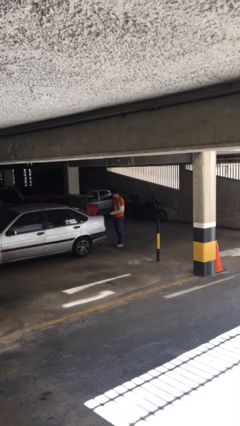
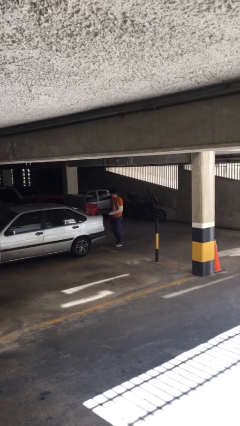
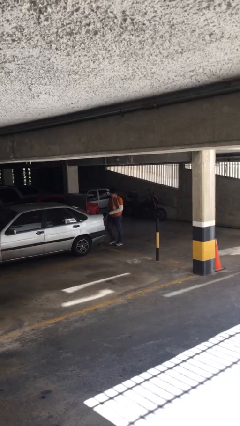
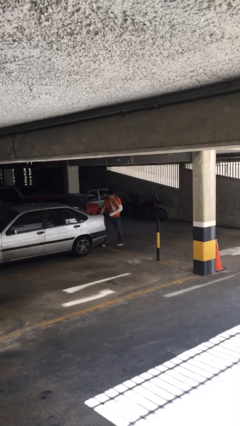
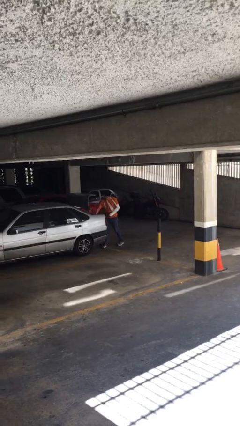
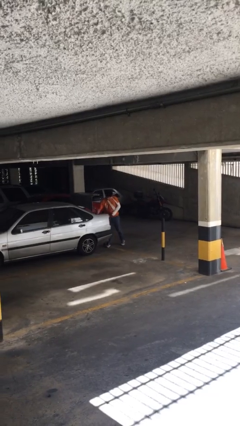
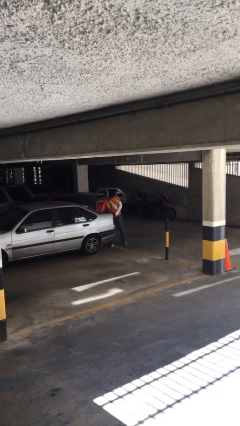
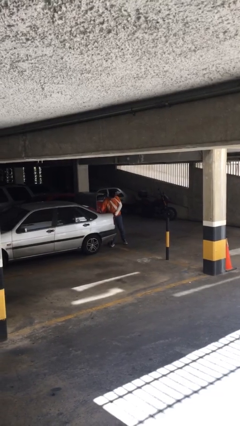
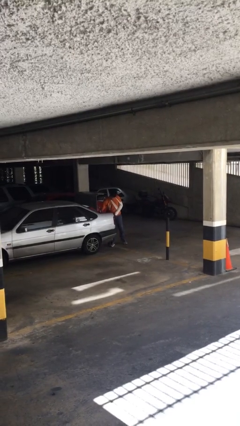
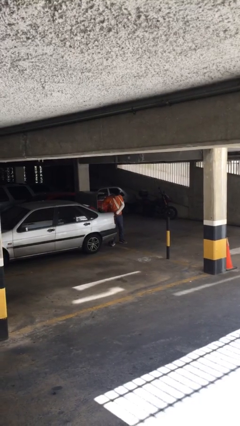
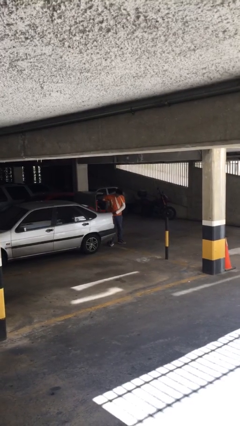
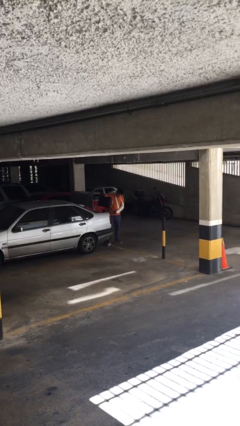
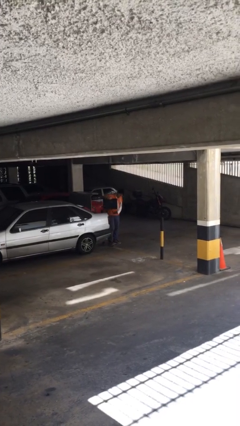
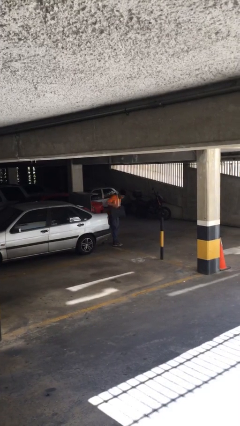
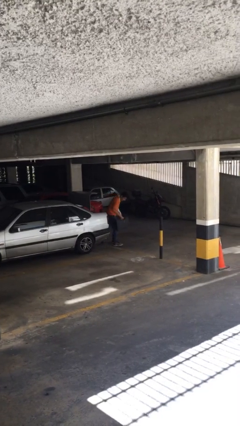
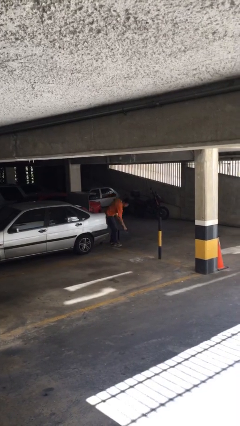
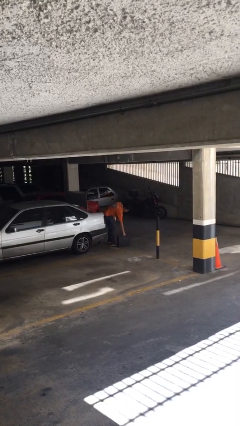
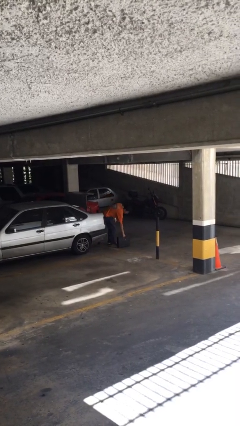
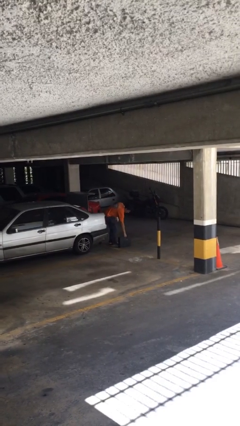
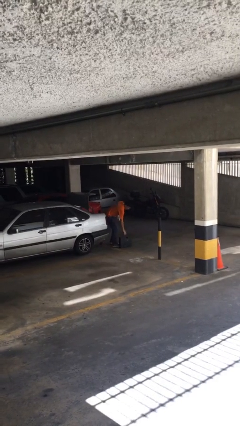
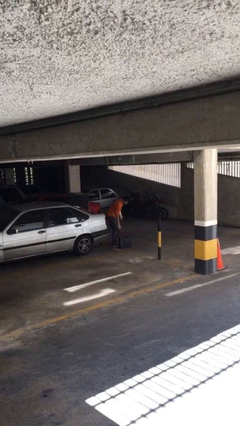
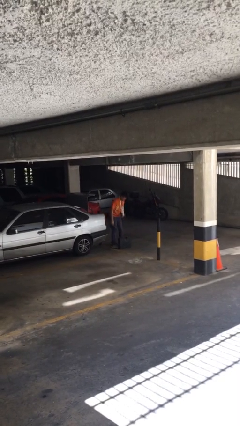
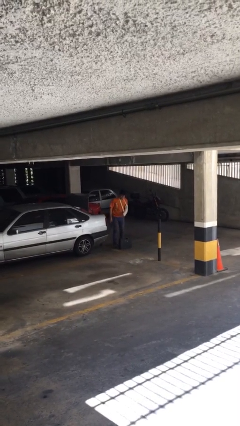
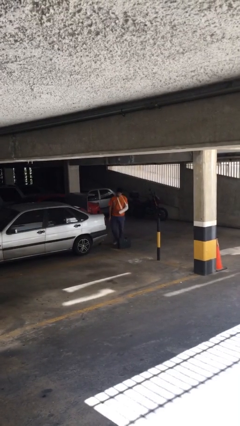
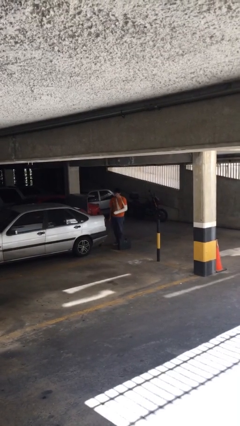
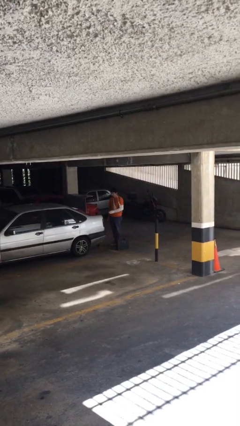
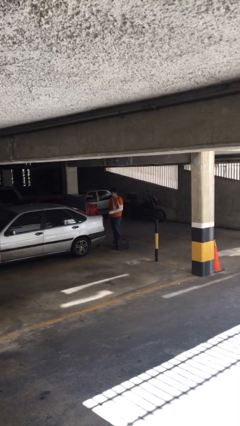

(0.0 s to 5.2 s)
person unloads car

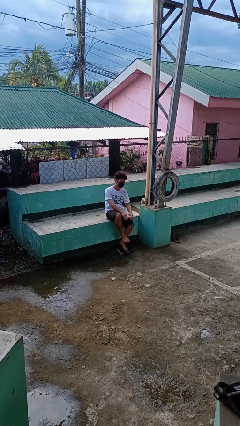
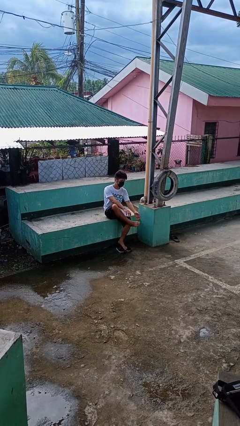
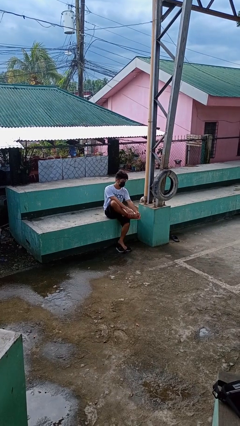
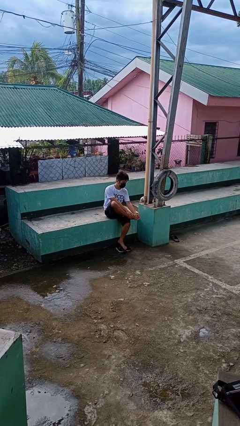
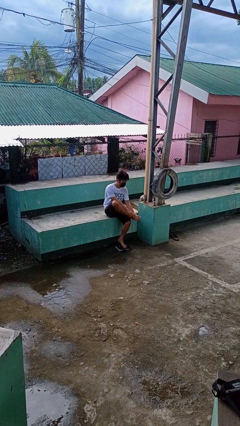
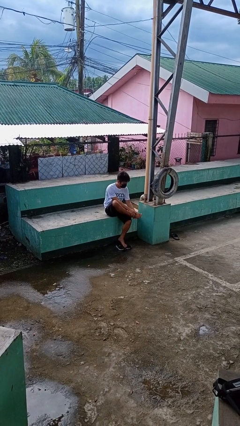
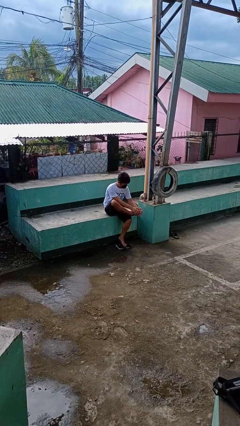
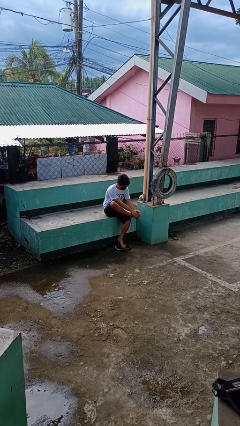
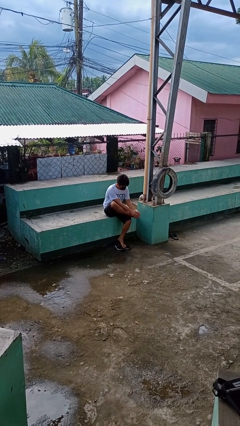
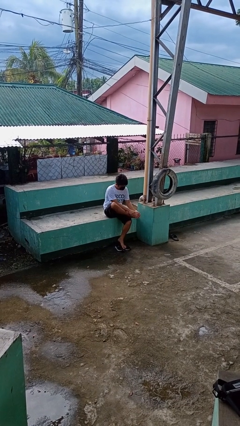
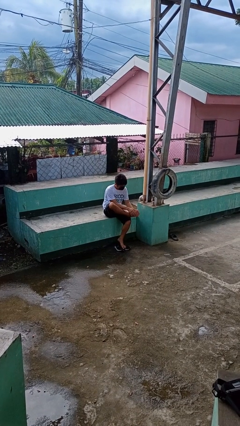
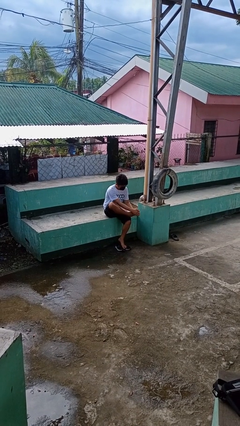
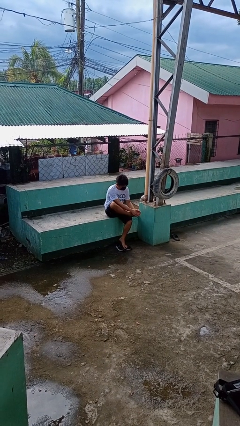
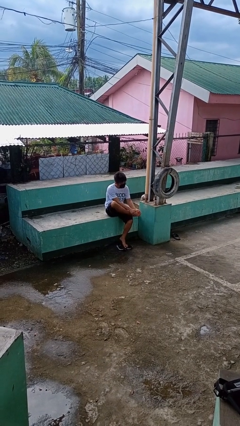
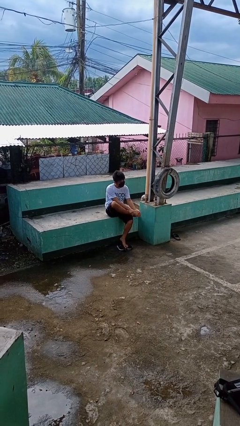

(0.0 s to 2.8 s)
person rubs foot

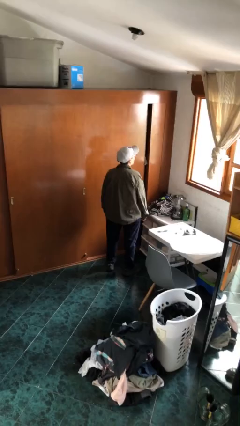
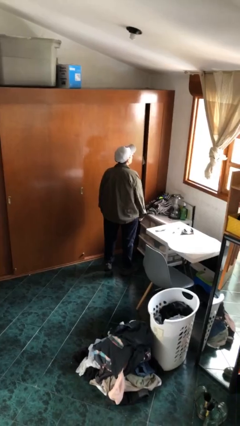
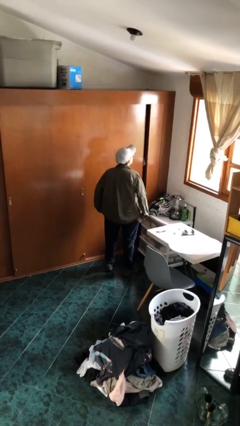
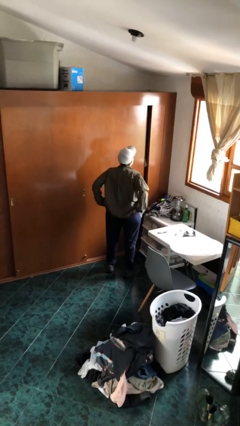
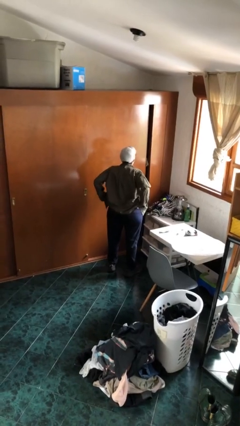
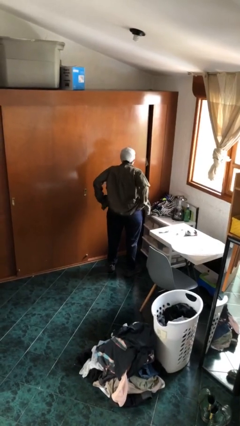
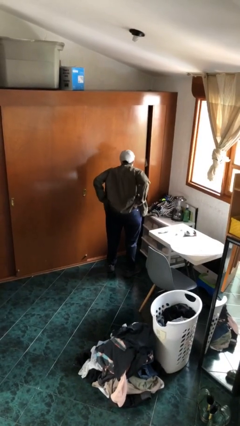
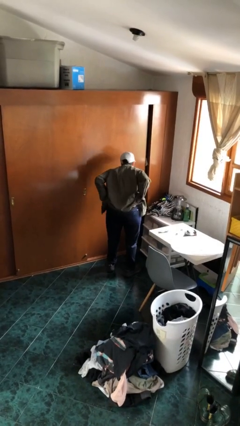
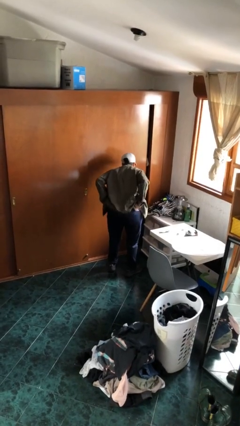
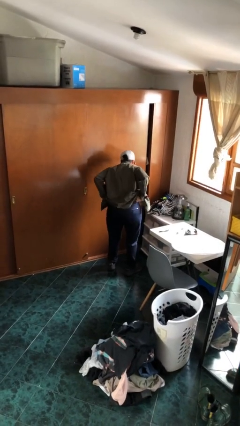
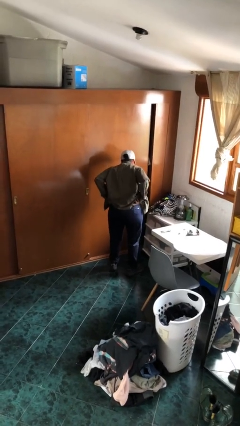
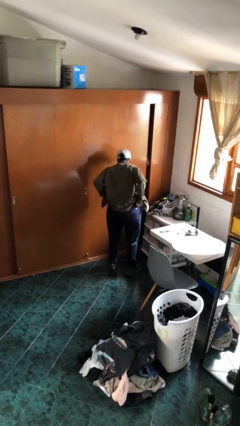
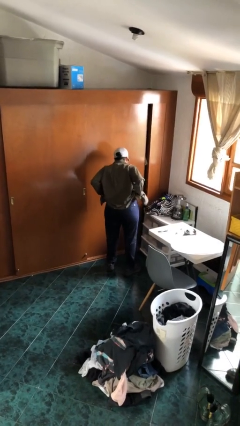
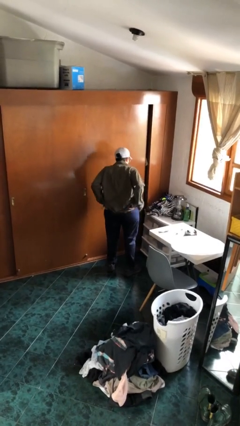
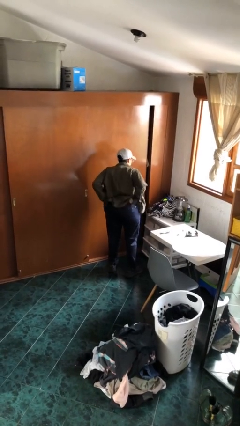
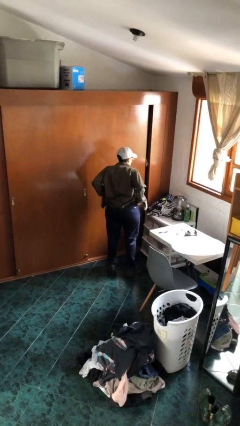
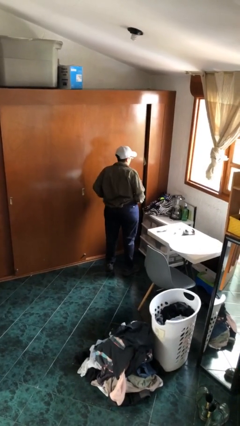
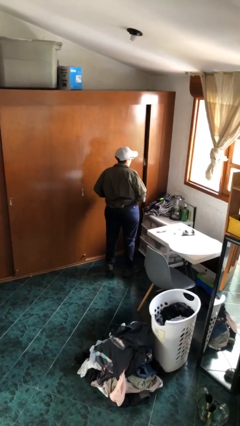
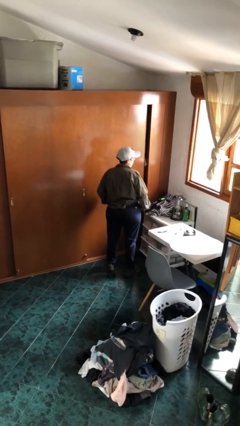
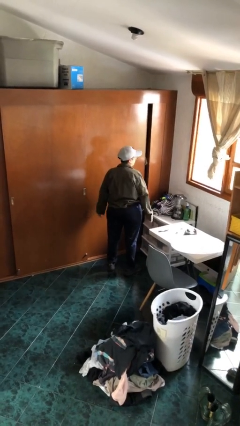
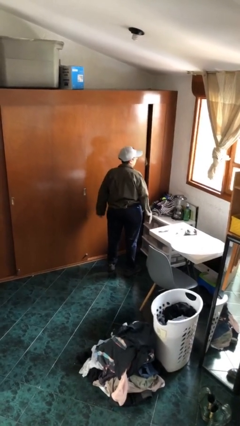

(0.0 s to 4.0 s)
person hikes up pants

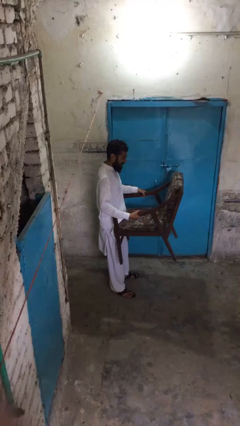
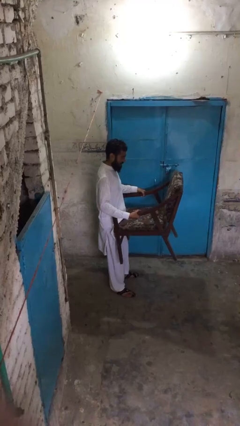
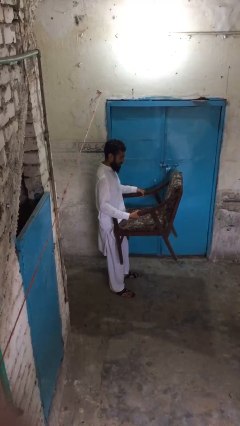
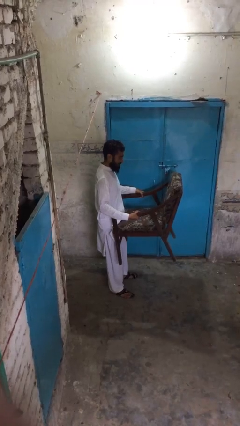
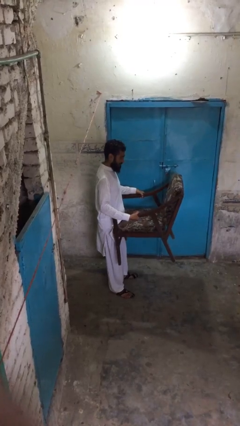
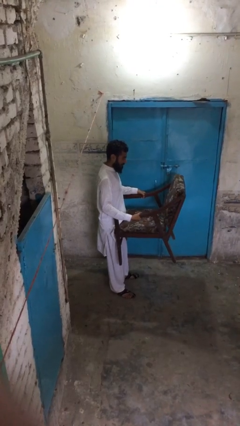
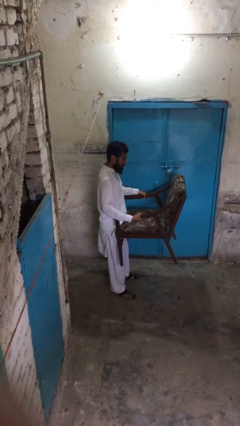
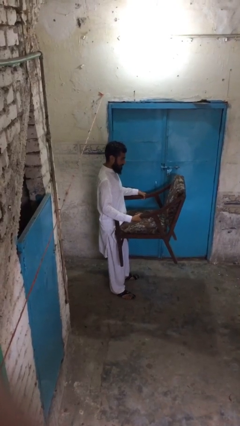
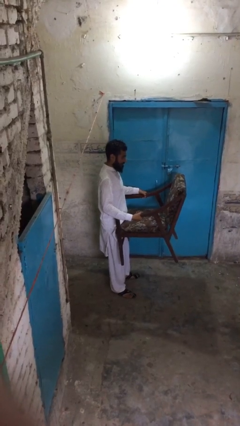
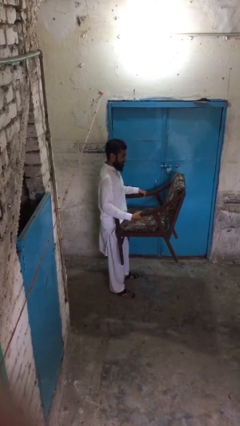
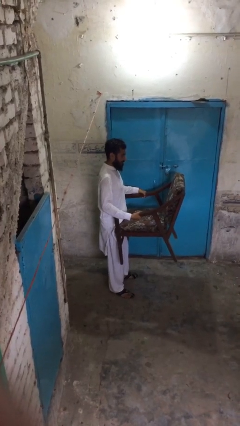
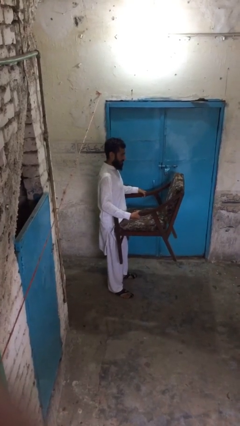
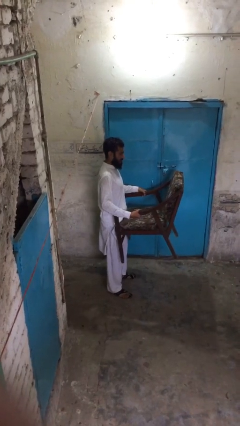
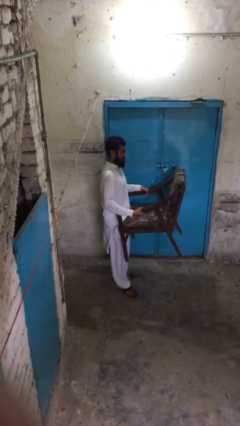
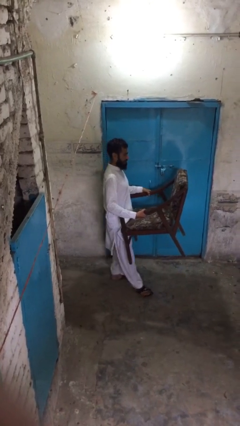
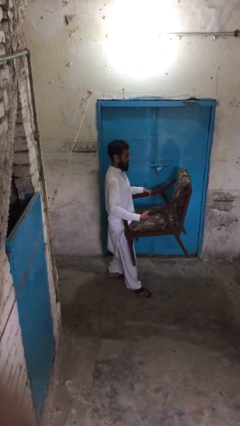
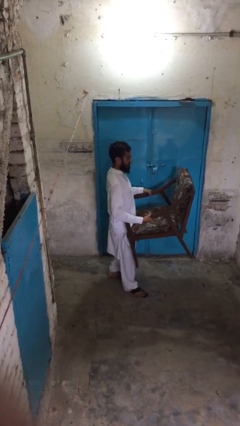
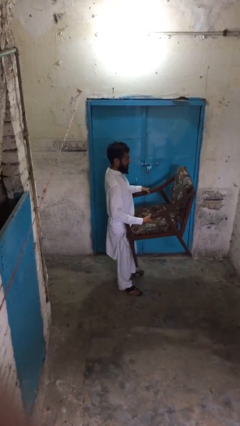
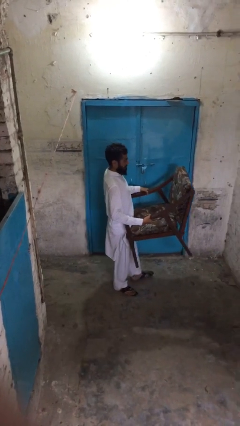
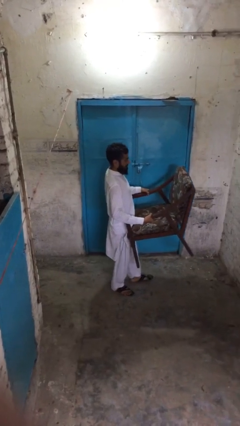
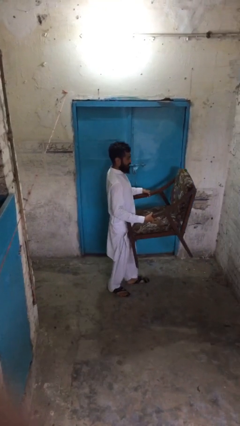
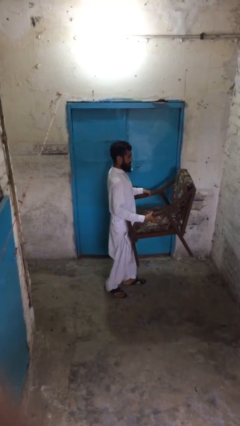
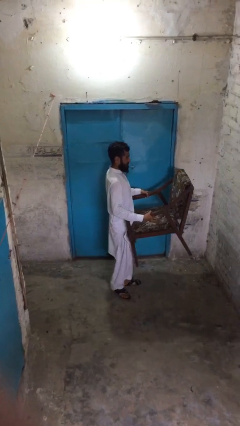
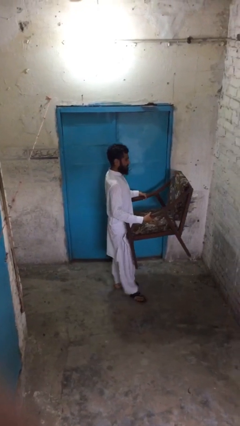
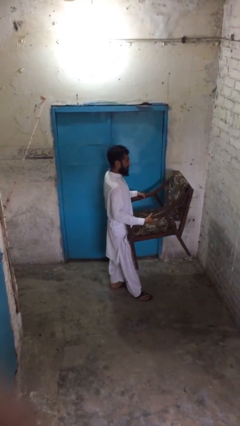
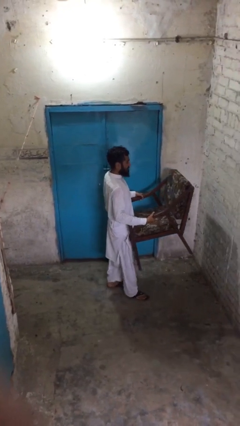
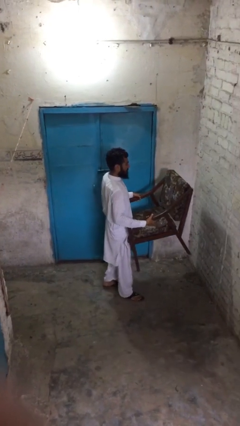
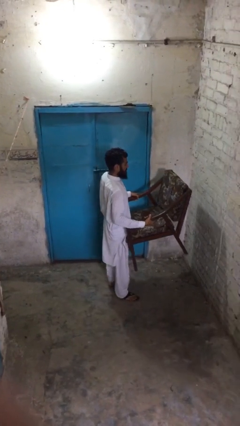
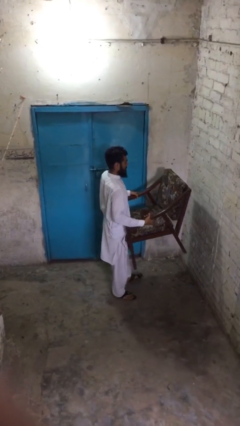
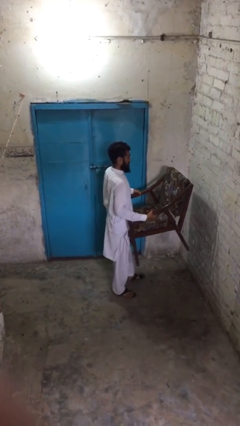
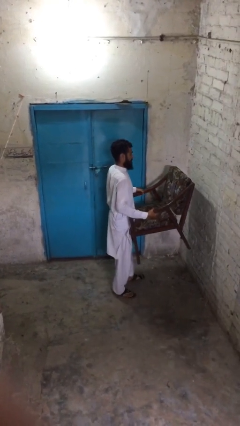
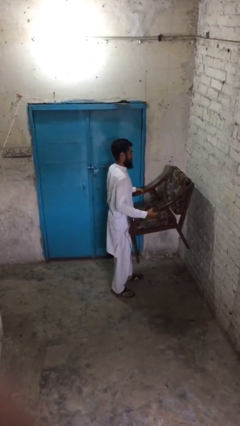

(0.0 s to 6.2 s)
person carries heavy object
